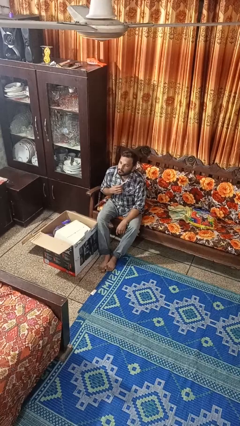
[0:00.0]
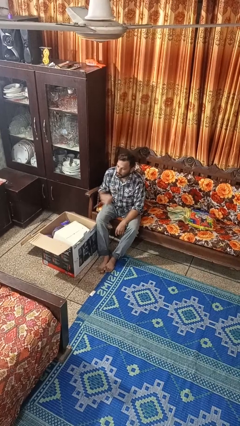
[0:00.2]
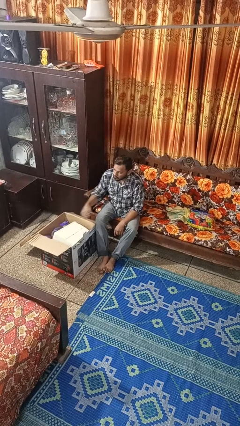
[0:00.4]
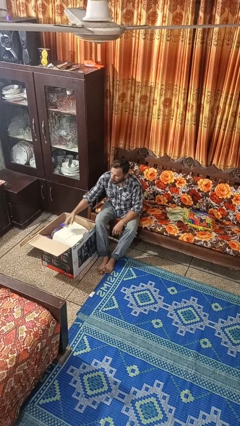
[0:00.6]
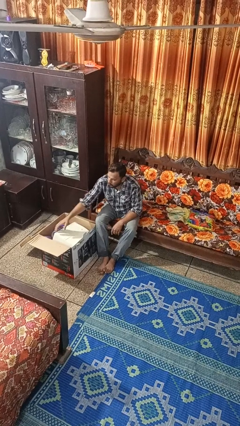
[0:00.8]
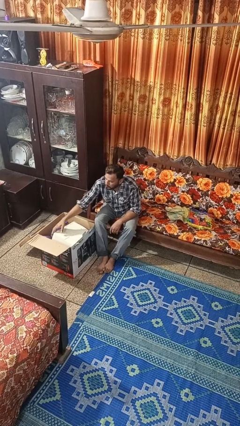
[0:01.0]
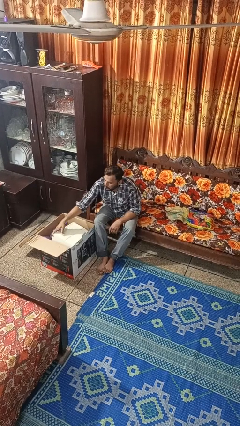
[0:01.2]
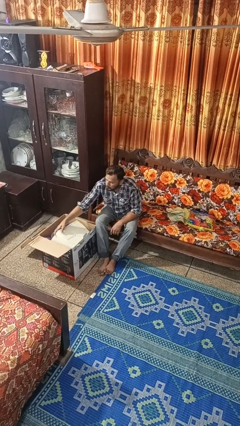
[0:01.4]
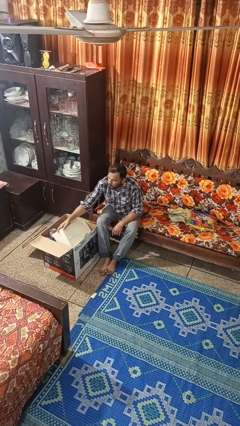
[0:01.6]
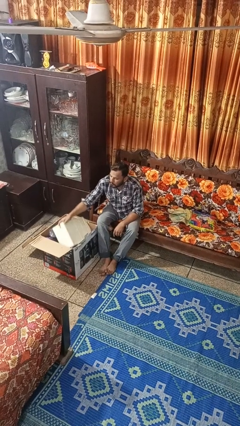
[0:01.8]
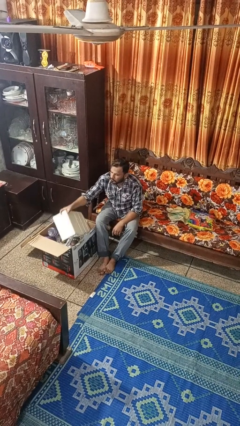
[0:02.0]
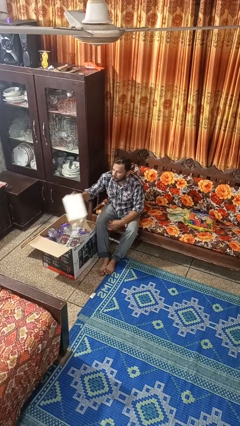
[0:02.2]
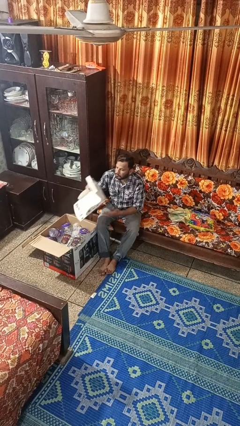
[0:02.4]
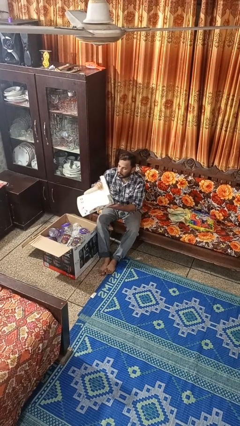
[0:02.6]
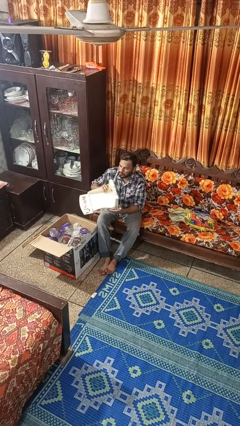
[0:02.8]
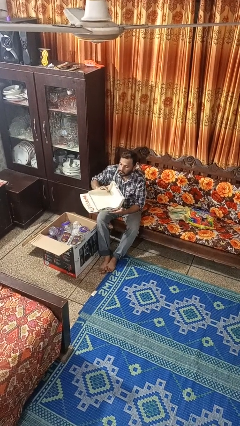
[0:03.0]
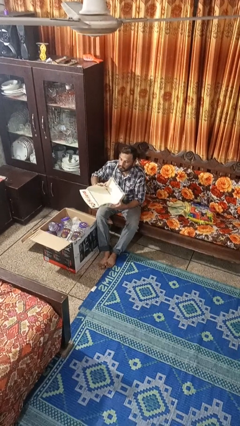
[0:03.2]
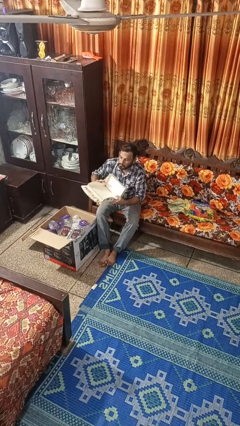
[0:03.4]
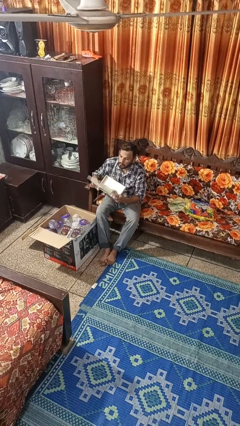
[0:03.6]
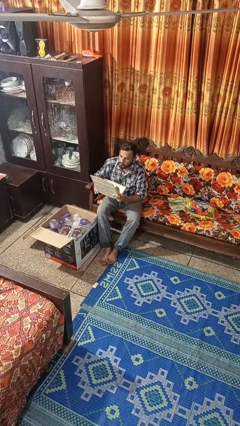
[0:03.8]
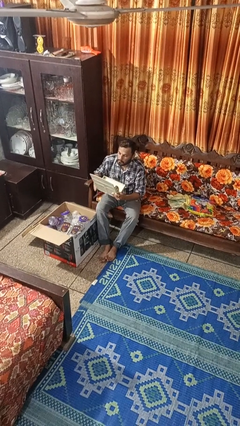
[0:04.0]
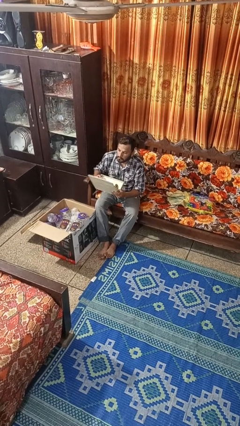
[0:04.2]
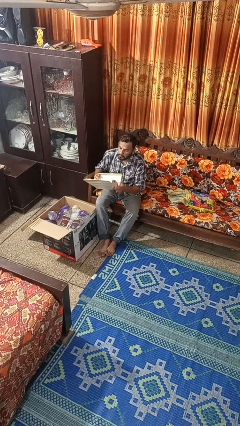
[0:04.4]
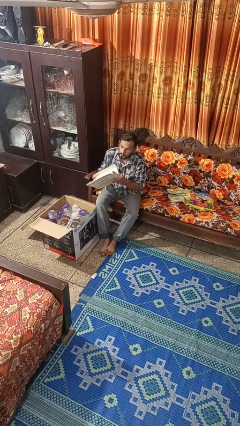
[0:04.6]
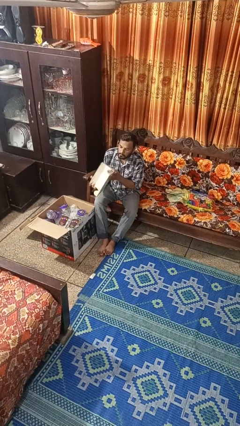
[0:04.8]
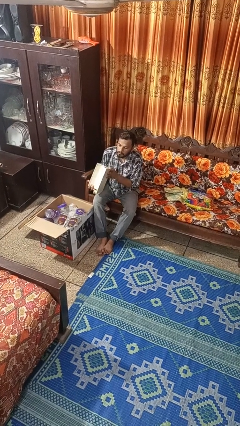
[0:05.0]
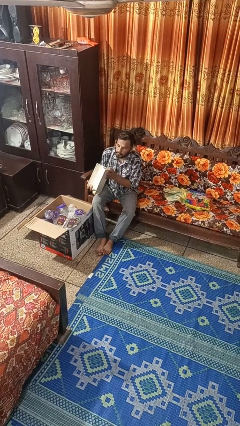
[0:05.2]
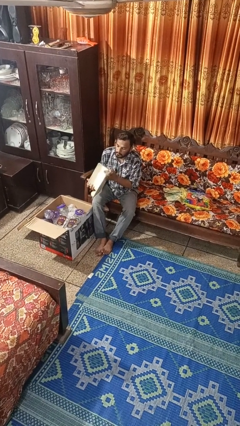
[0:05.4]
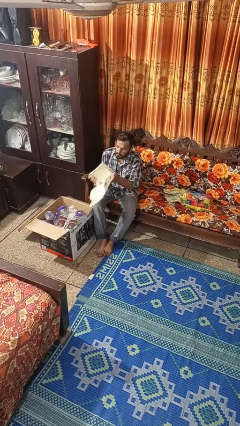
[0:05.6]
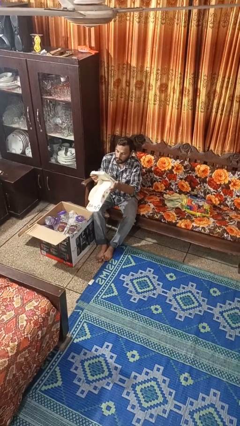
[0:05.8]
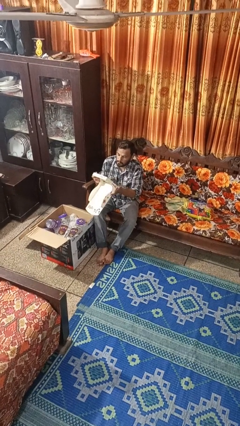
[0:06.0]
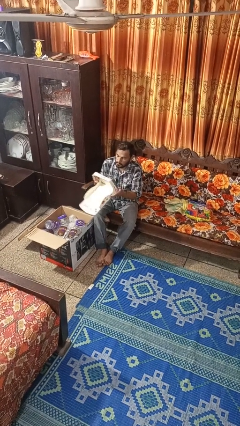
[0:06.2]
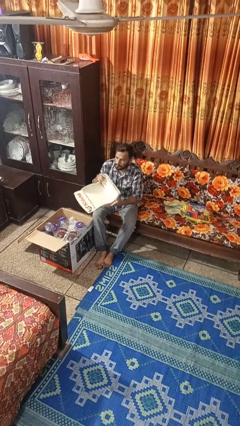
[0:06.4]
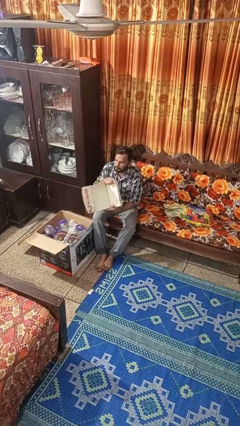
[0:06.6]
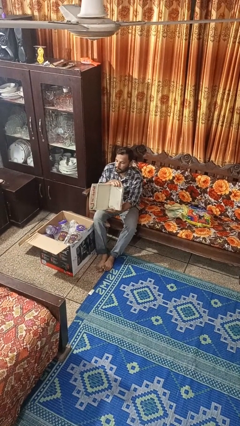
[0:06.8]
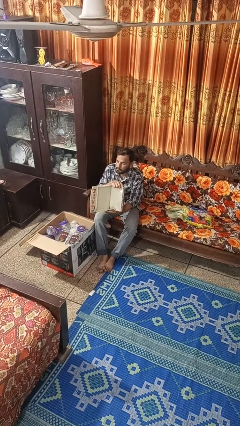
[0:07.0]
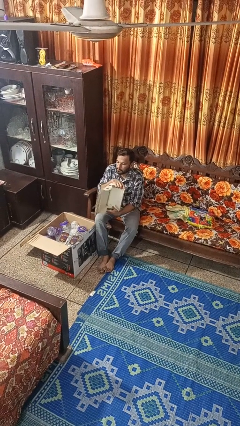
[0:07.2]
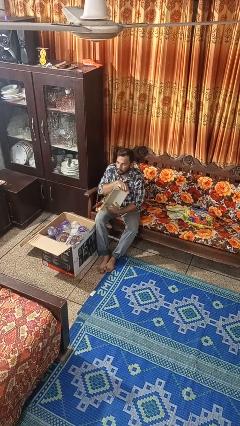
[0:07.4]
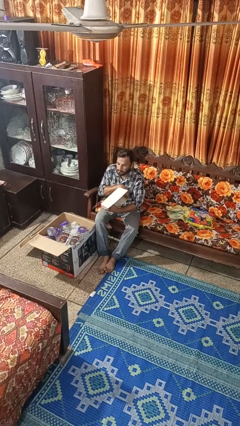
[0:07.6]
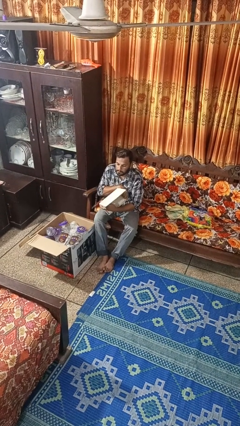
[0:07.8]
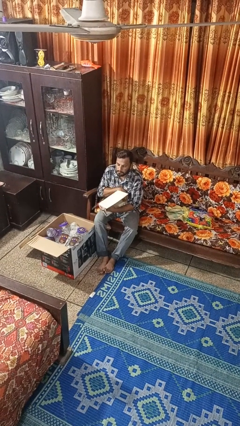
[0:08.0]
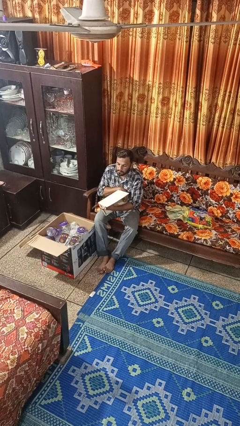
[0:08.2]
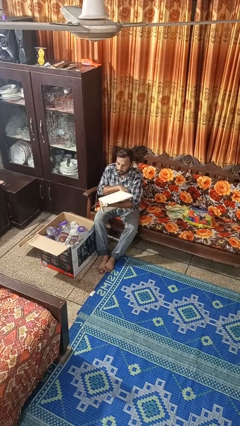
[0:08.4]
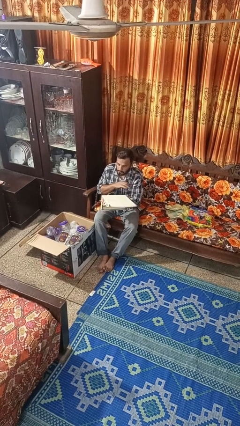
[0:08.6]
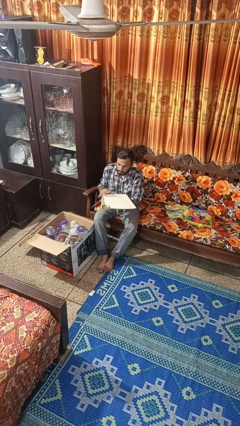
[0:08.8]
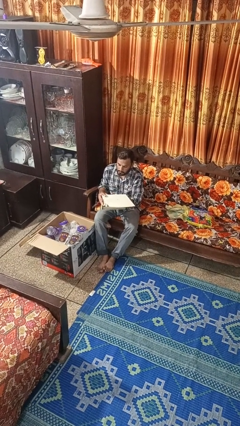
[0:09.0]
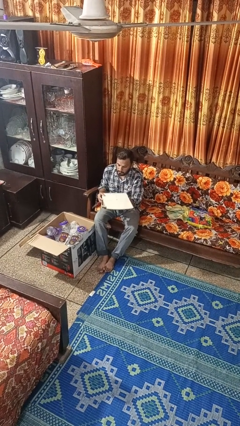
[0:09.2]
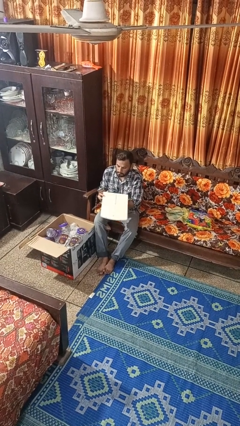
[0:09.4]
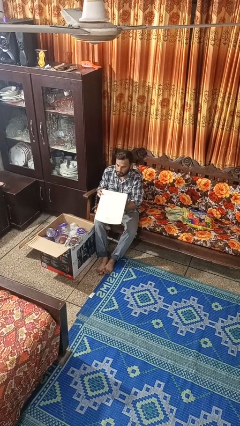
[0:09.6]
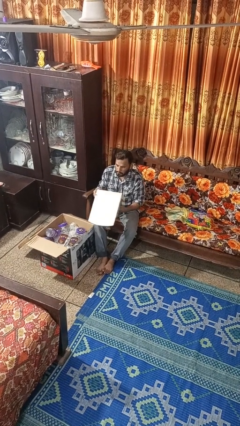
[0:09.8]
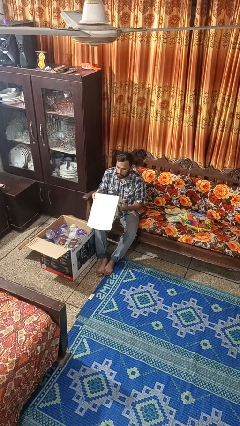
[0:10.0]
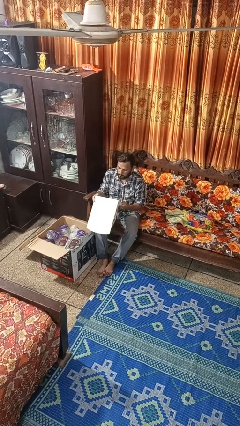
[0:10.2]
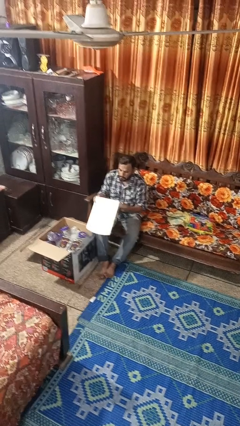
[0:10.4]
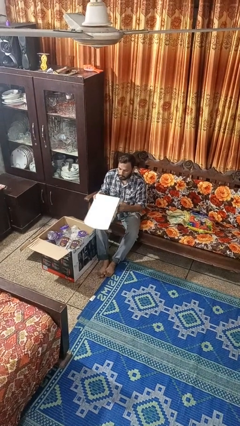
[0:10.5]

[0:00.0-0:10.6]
person takes object from box

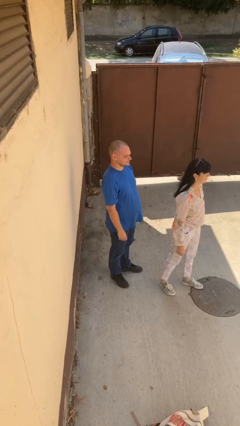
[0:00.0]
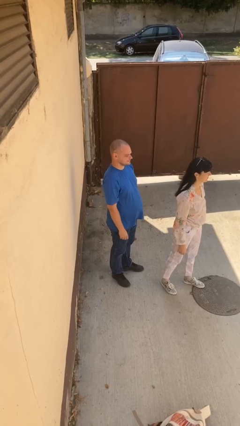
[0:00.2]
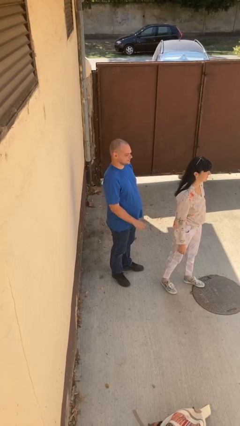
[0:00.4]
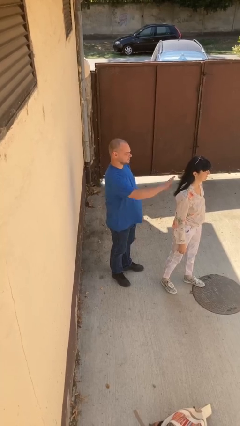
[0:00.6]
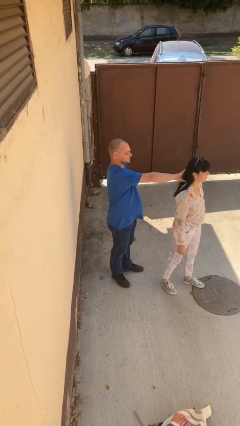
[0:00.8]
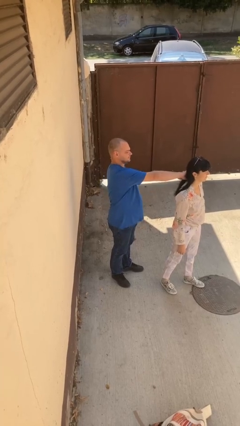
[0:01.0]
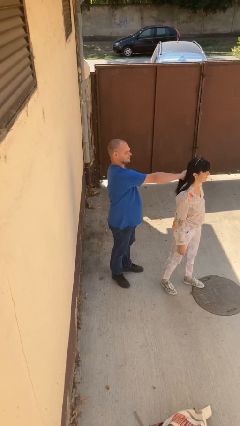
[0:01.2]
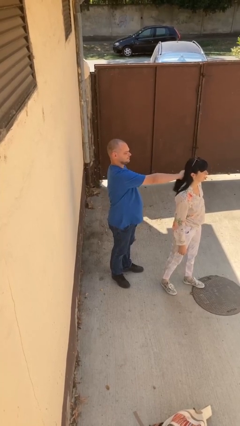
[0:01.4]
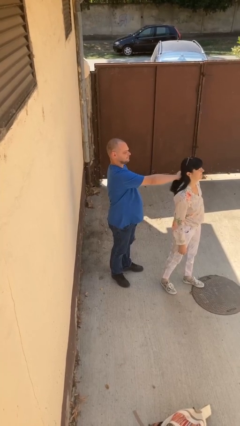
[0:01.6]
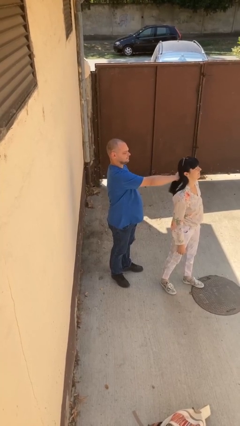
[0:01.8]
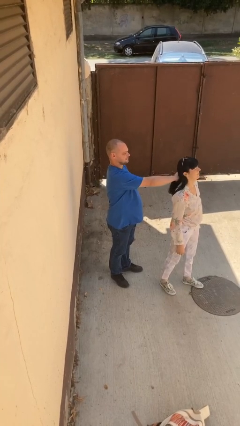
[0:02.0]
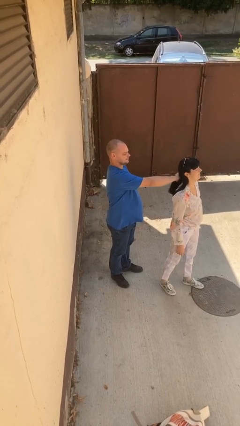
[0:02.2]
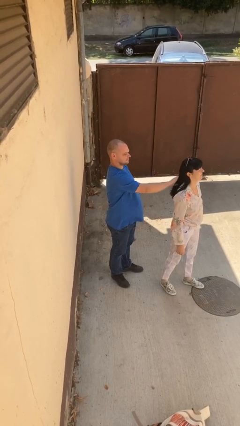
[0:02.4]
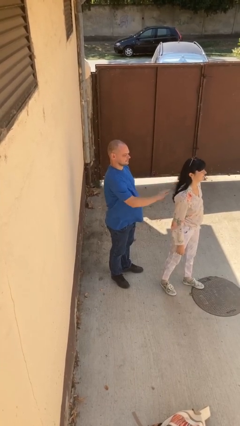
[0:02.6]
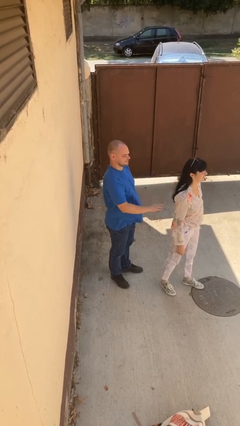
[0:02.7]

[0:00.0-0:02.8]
person grabs person by hair

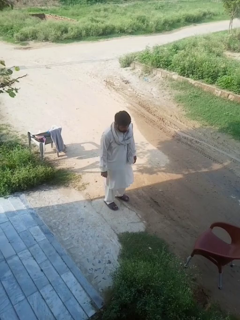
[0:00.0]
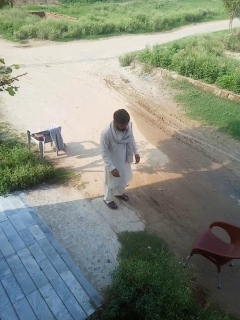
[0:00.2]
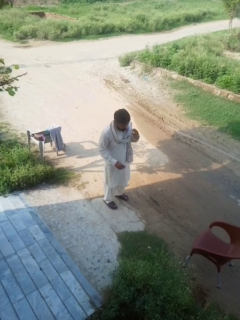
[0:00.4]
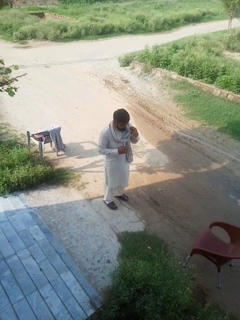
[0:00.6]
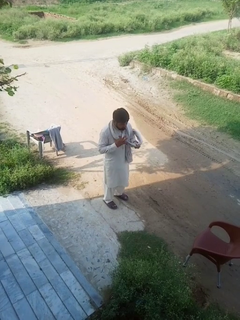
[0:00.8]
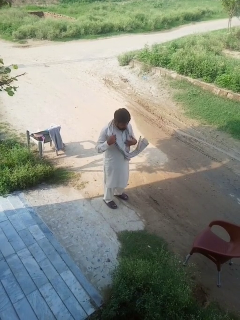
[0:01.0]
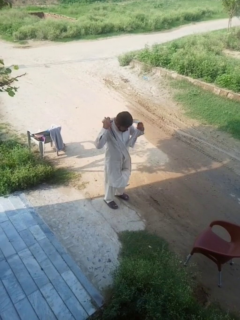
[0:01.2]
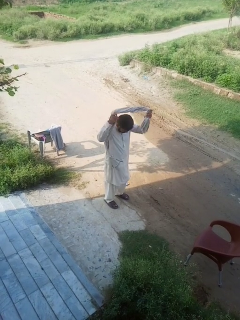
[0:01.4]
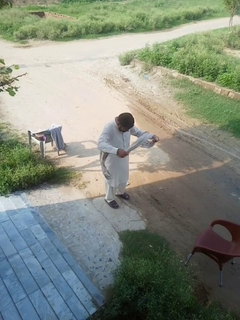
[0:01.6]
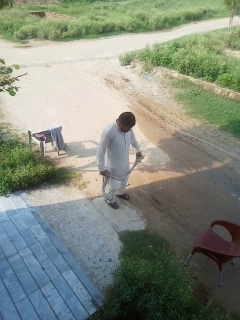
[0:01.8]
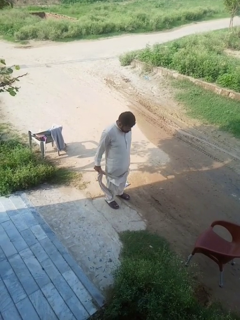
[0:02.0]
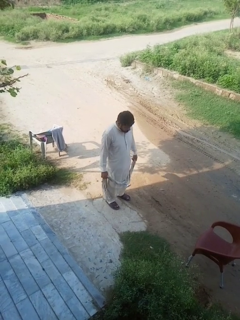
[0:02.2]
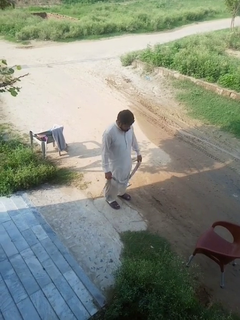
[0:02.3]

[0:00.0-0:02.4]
person takes off scarf

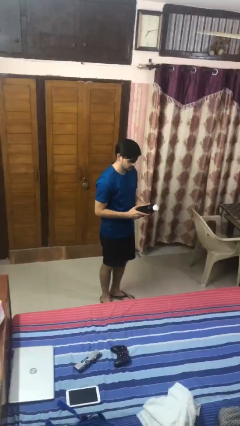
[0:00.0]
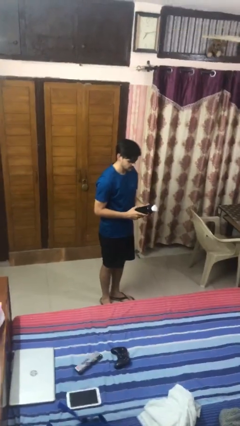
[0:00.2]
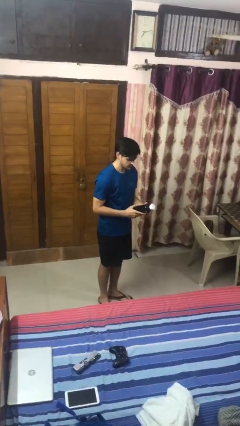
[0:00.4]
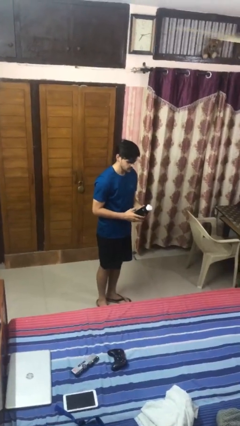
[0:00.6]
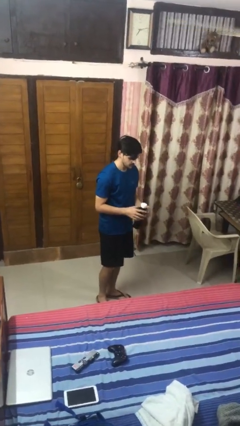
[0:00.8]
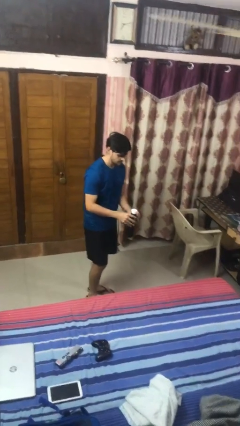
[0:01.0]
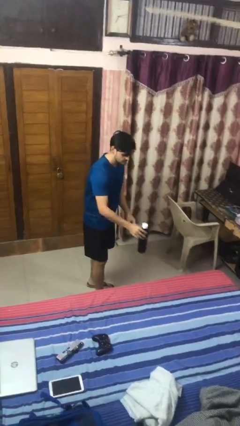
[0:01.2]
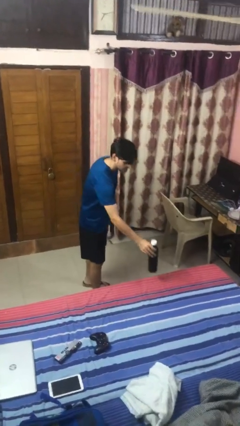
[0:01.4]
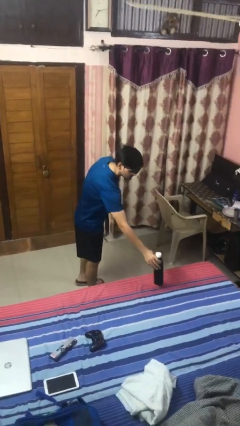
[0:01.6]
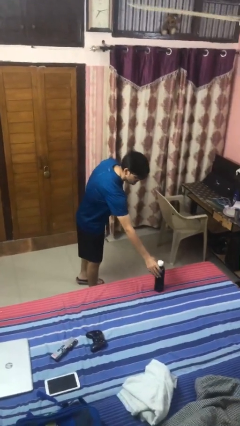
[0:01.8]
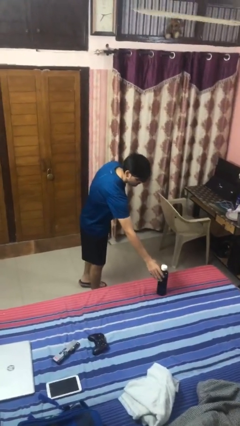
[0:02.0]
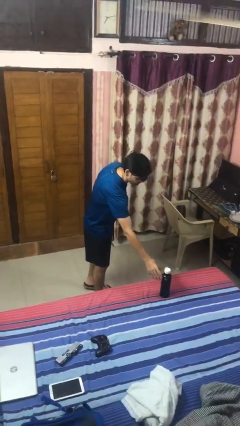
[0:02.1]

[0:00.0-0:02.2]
person puts down object on bed

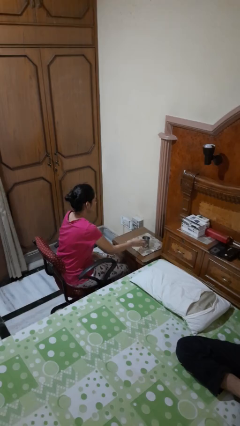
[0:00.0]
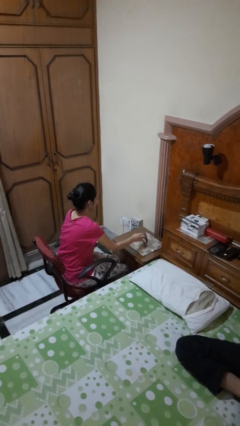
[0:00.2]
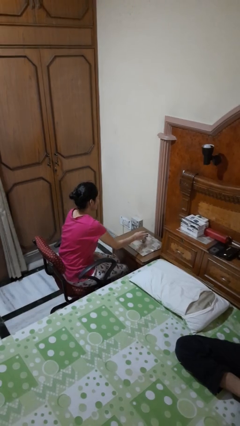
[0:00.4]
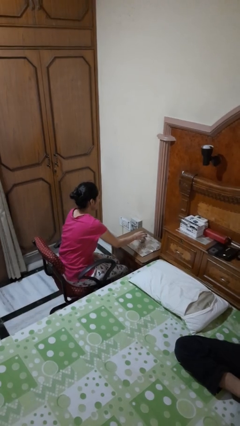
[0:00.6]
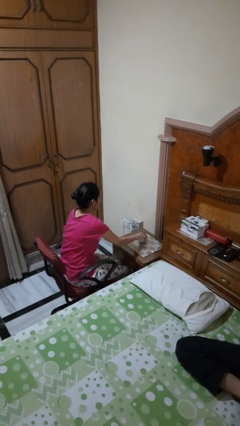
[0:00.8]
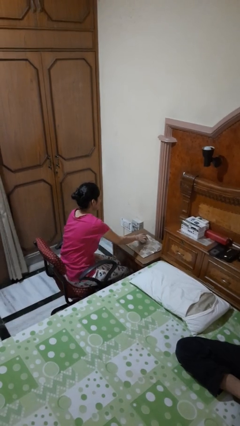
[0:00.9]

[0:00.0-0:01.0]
person knocks over glass
